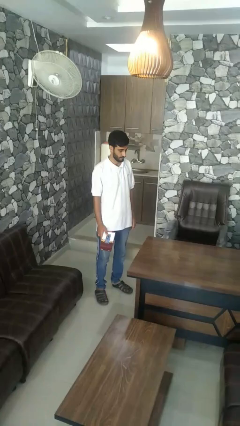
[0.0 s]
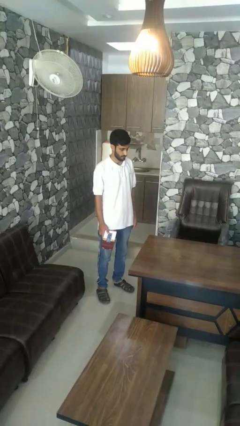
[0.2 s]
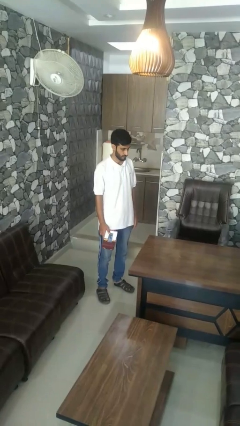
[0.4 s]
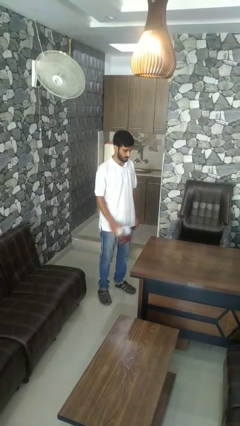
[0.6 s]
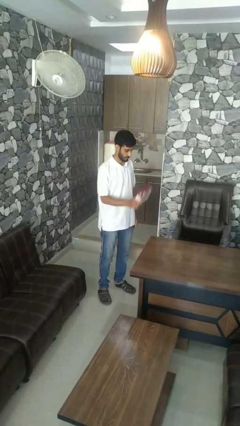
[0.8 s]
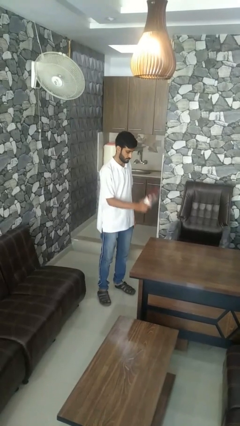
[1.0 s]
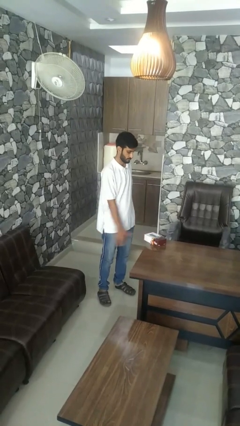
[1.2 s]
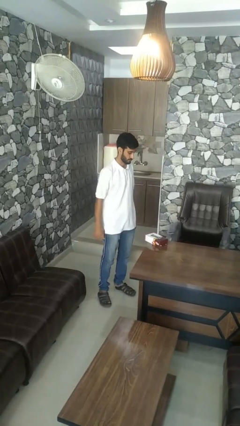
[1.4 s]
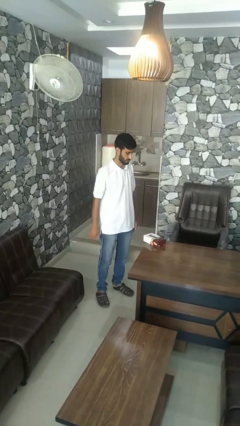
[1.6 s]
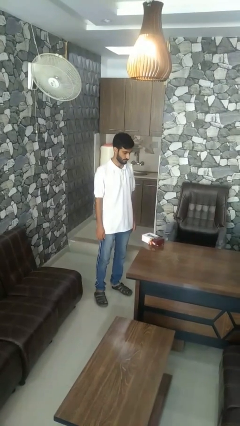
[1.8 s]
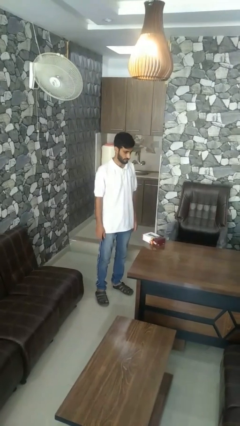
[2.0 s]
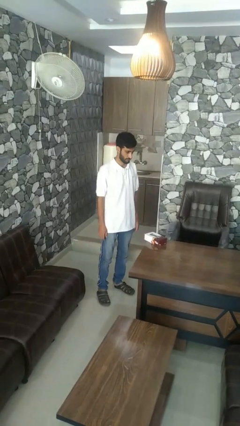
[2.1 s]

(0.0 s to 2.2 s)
person throws object on table

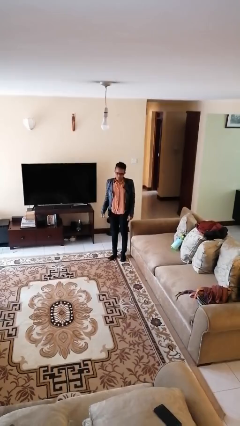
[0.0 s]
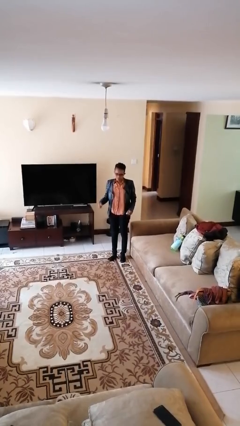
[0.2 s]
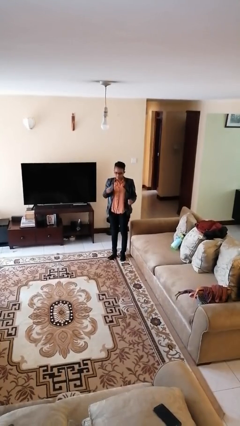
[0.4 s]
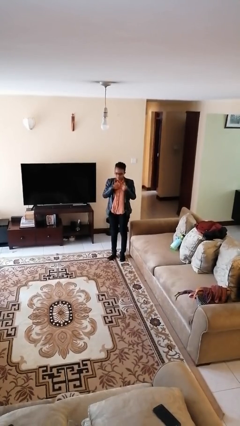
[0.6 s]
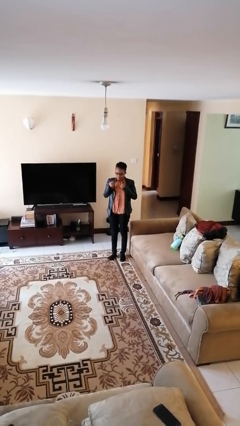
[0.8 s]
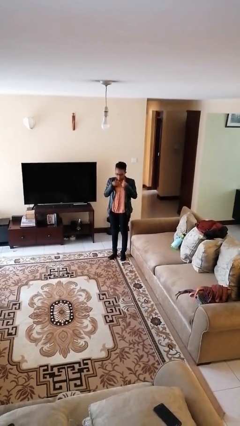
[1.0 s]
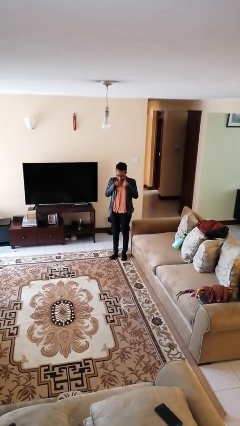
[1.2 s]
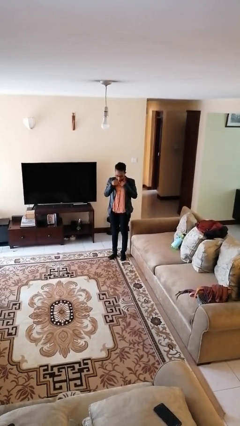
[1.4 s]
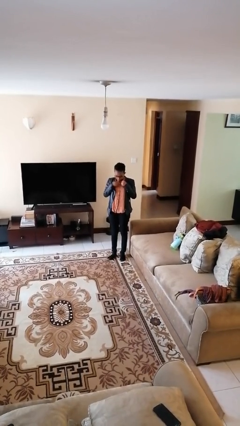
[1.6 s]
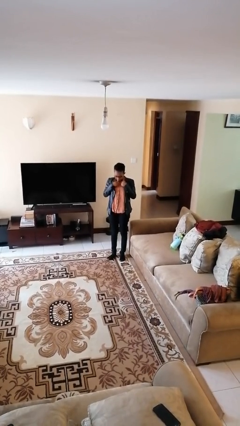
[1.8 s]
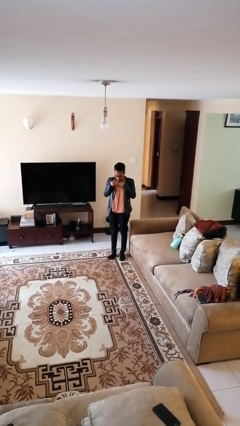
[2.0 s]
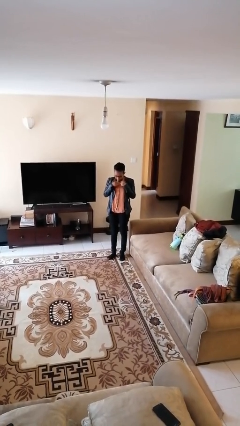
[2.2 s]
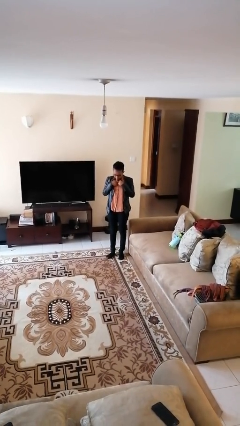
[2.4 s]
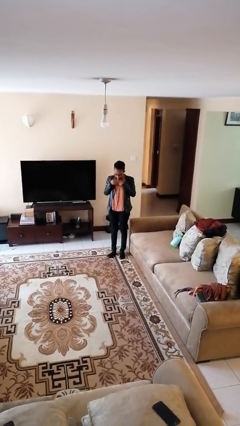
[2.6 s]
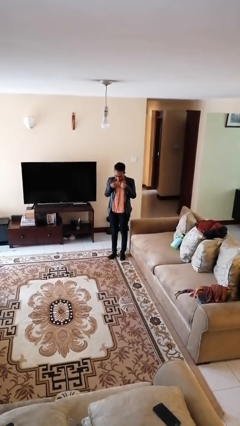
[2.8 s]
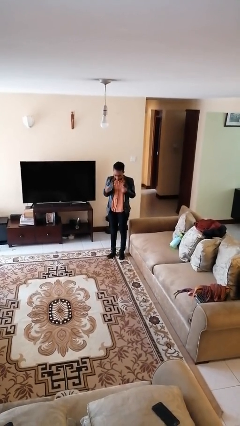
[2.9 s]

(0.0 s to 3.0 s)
person drums on chest

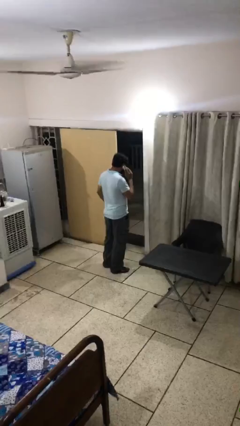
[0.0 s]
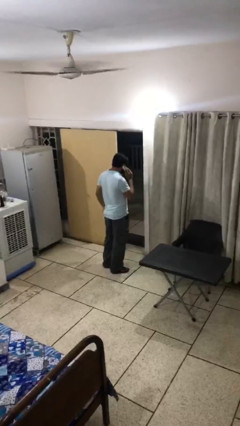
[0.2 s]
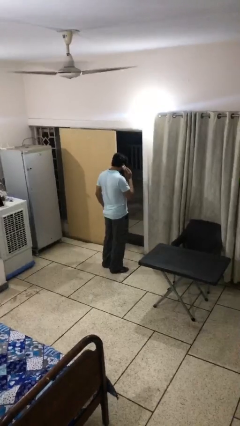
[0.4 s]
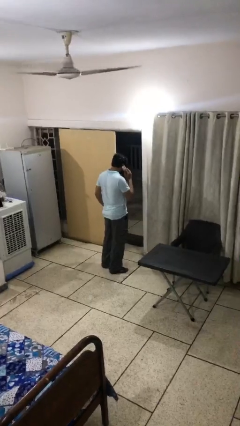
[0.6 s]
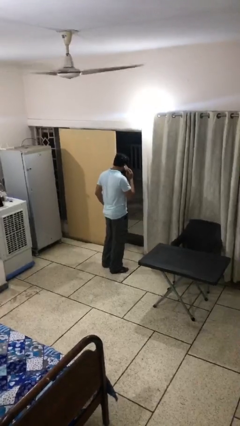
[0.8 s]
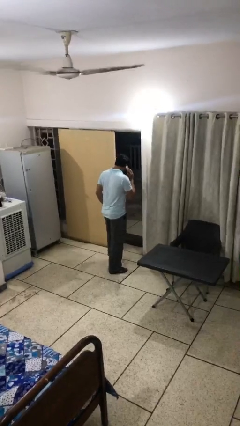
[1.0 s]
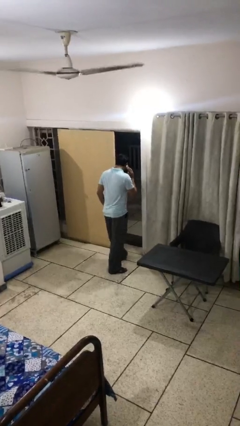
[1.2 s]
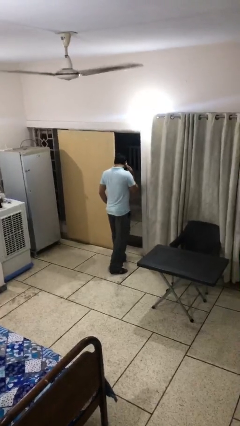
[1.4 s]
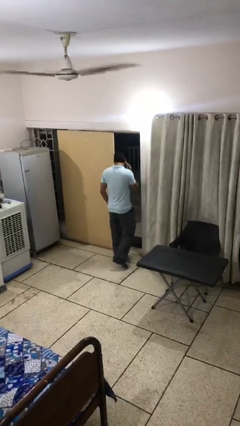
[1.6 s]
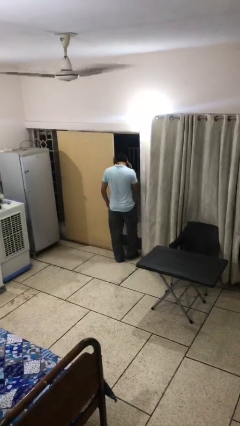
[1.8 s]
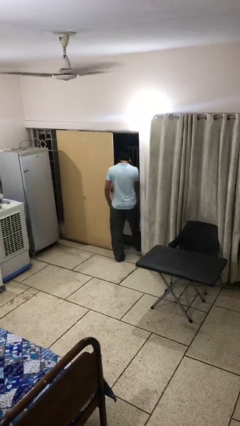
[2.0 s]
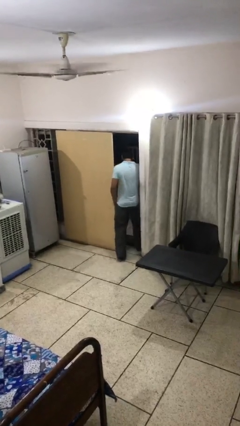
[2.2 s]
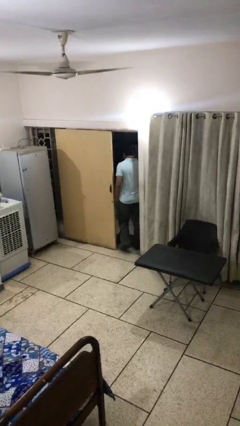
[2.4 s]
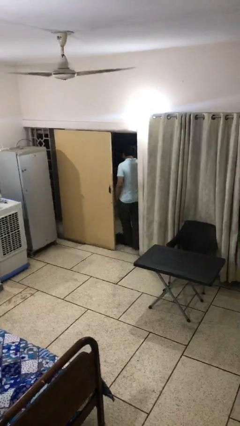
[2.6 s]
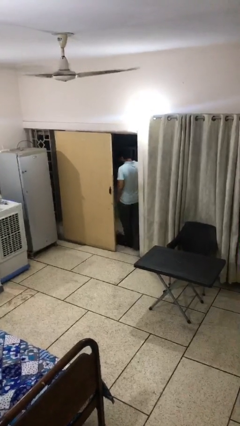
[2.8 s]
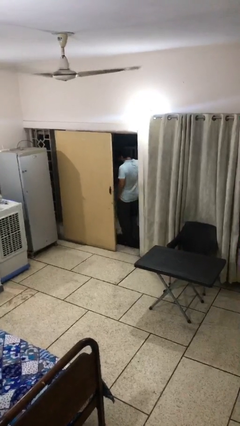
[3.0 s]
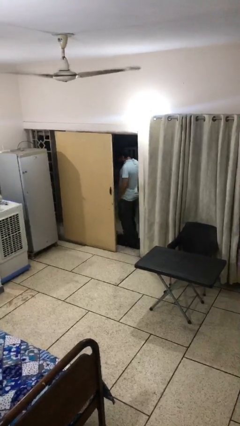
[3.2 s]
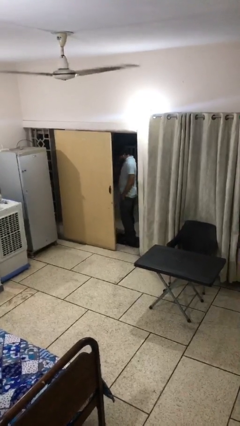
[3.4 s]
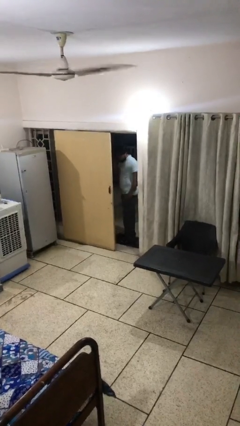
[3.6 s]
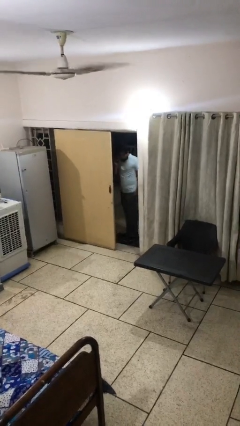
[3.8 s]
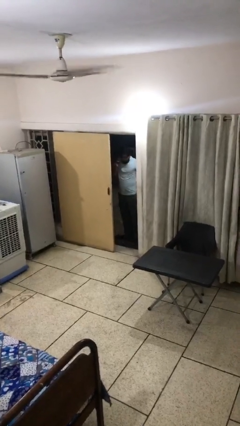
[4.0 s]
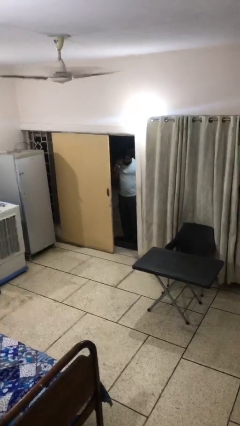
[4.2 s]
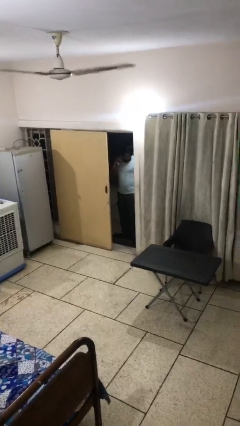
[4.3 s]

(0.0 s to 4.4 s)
person exits scene through structure

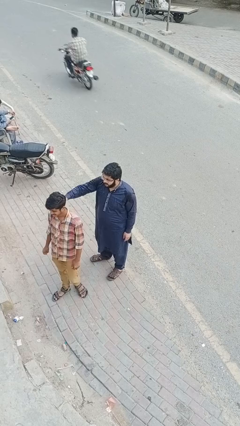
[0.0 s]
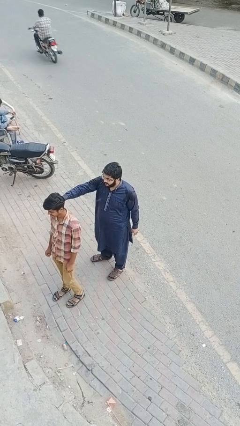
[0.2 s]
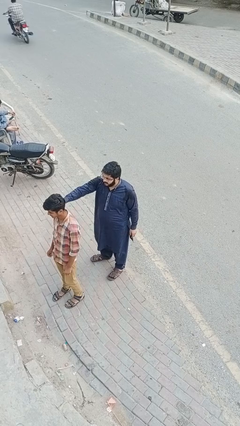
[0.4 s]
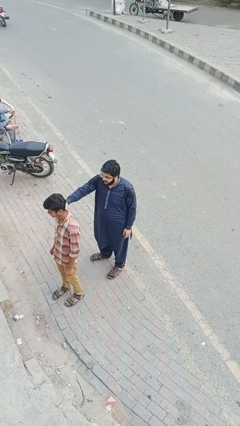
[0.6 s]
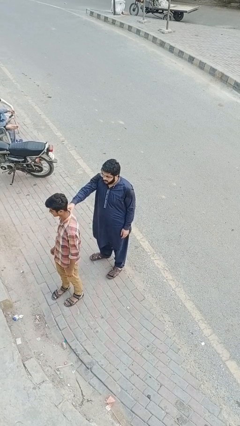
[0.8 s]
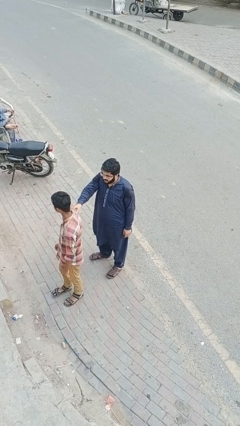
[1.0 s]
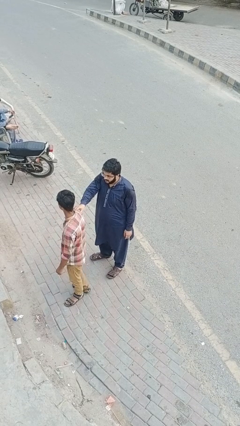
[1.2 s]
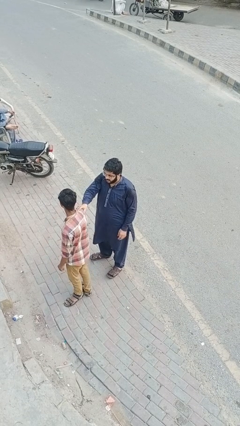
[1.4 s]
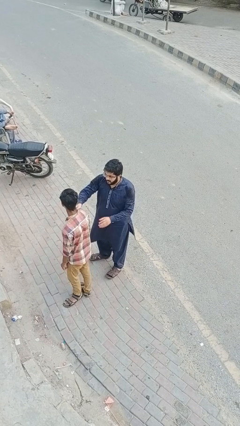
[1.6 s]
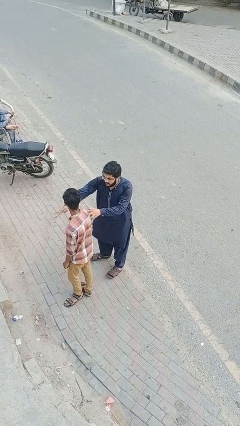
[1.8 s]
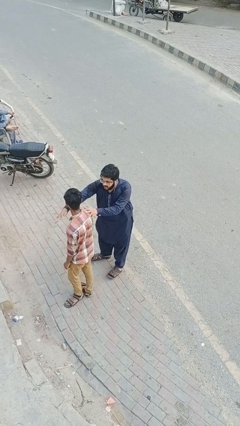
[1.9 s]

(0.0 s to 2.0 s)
person grabs person by shoulder

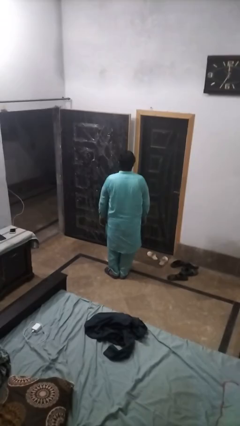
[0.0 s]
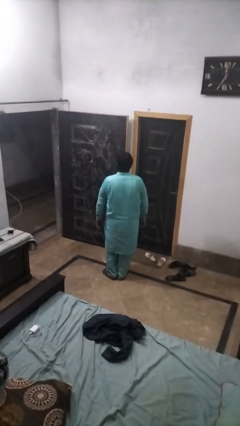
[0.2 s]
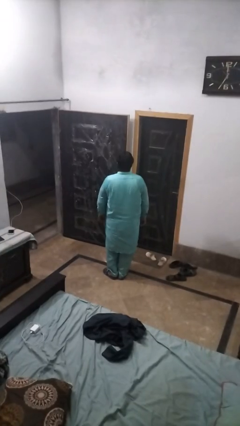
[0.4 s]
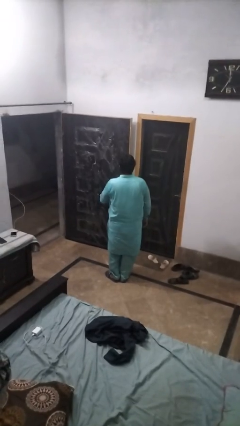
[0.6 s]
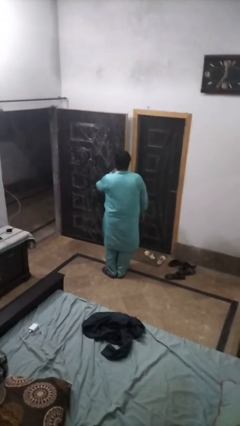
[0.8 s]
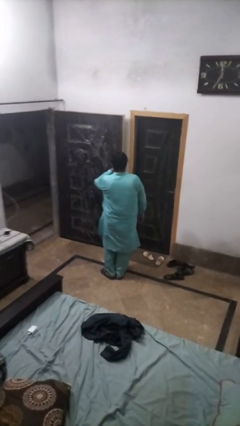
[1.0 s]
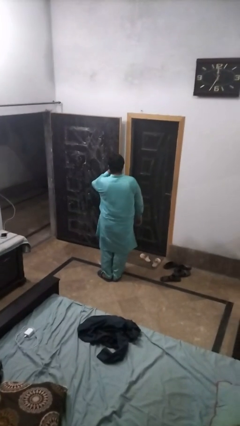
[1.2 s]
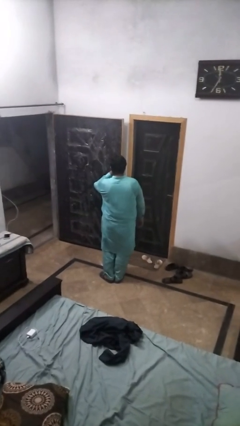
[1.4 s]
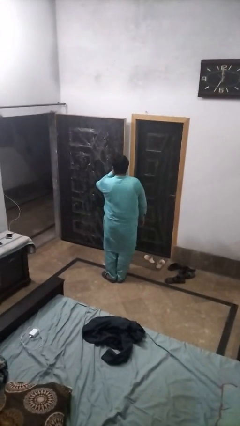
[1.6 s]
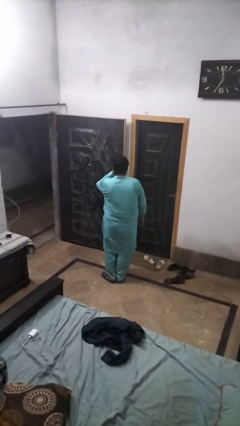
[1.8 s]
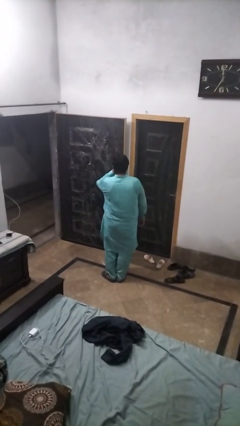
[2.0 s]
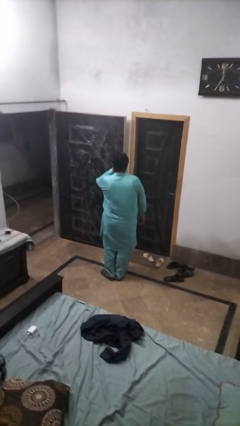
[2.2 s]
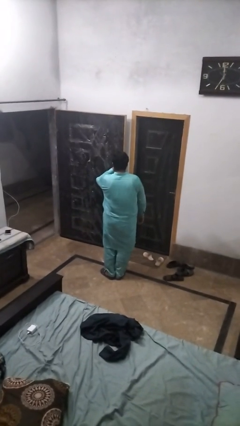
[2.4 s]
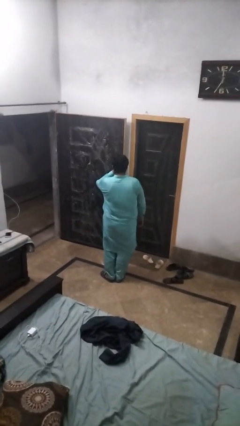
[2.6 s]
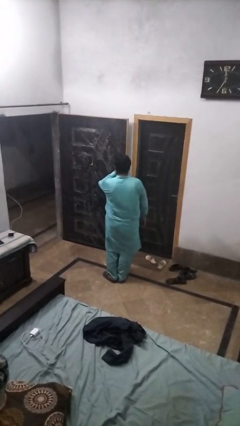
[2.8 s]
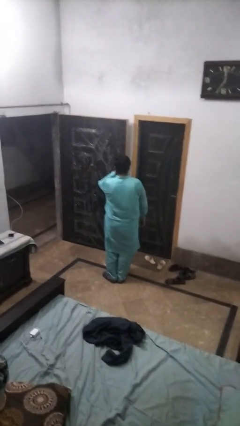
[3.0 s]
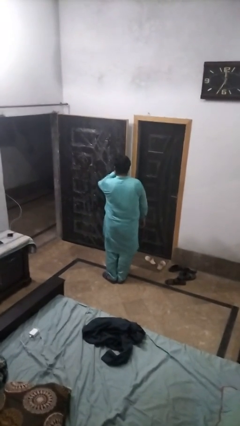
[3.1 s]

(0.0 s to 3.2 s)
person licks fingers

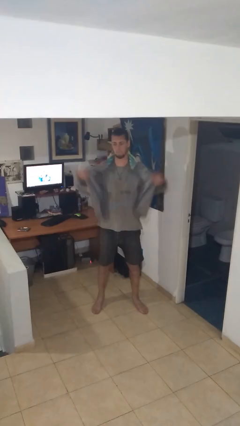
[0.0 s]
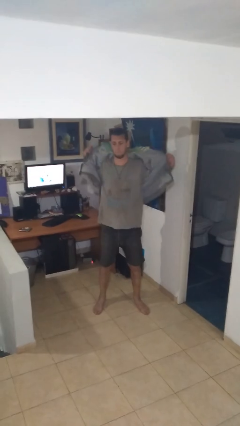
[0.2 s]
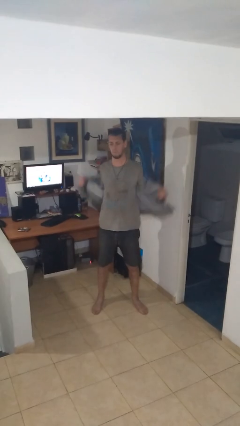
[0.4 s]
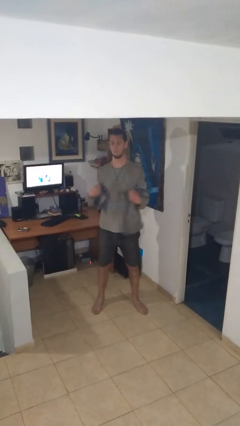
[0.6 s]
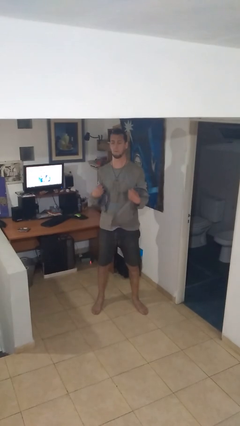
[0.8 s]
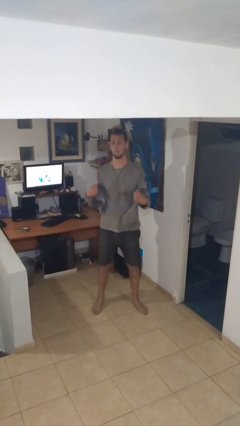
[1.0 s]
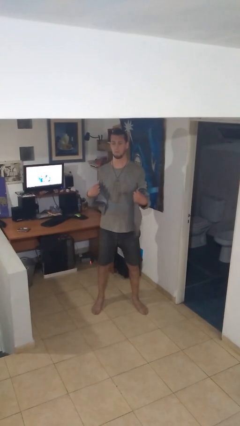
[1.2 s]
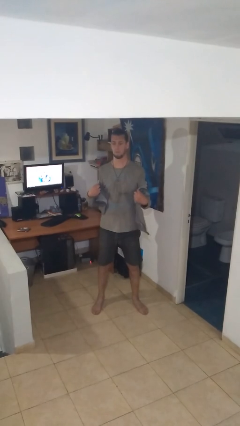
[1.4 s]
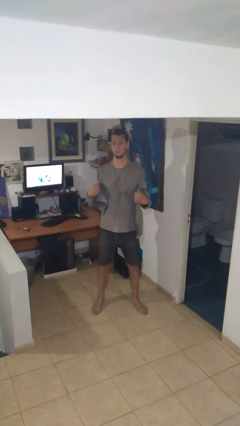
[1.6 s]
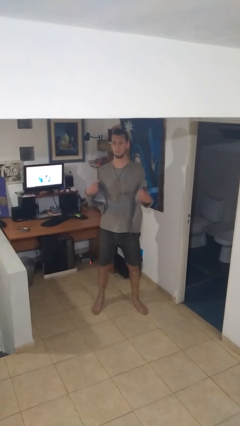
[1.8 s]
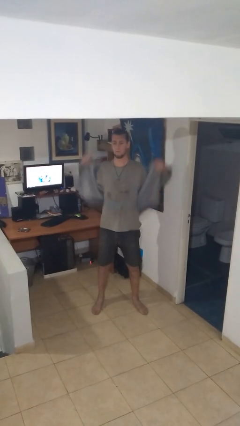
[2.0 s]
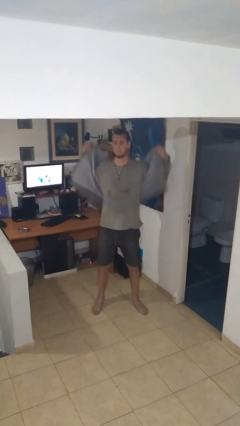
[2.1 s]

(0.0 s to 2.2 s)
person takes off jacket

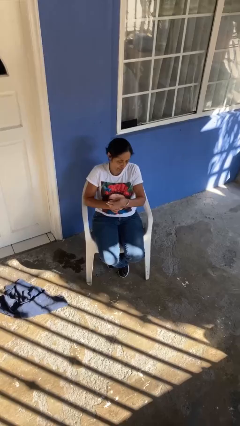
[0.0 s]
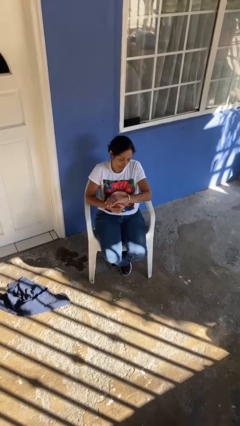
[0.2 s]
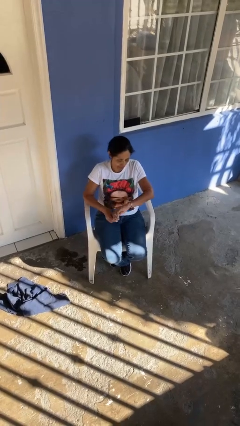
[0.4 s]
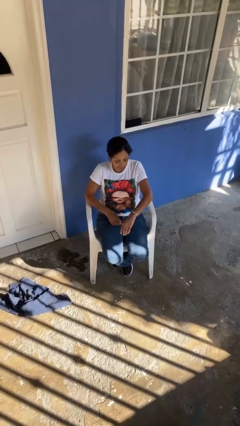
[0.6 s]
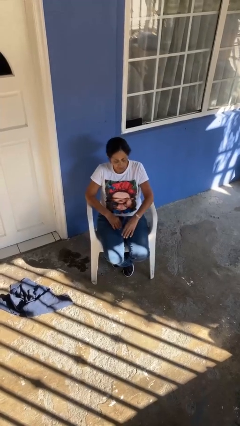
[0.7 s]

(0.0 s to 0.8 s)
person puts on wristwatch
